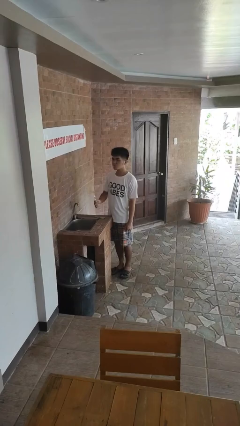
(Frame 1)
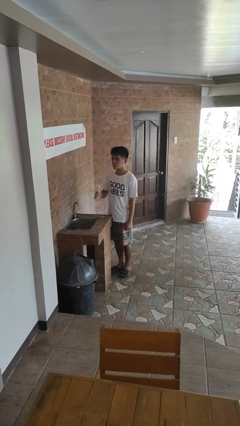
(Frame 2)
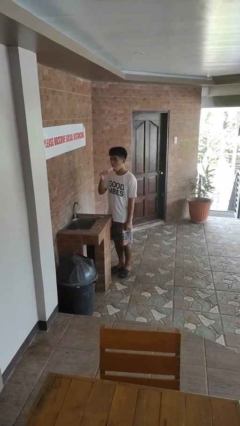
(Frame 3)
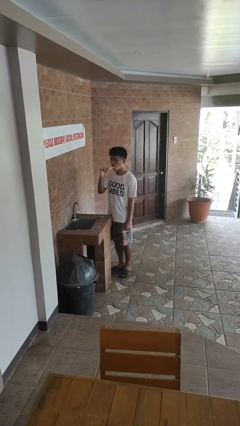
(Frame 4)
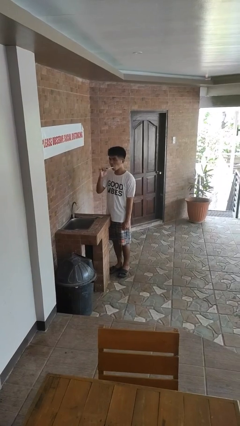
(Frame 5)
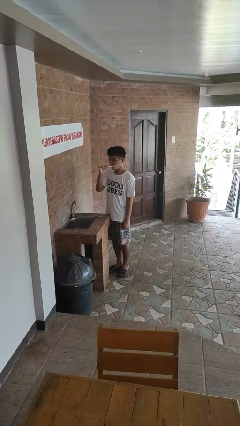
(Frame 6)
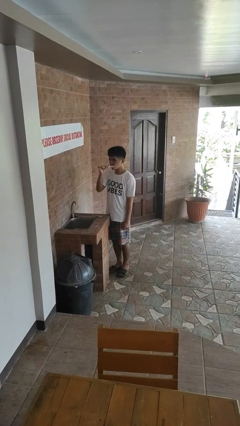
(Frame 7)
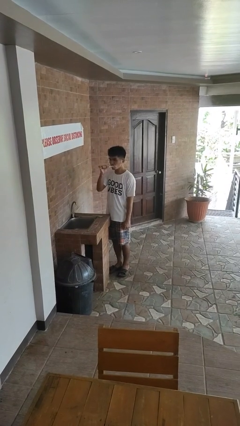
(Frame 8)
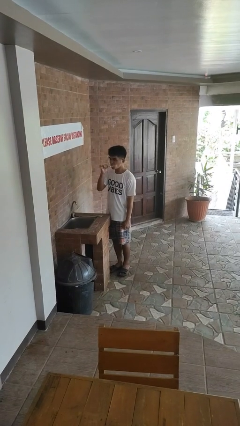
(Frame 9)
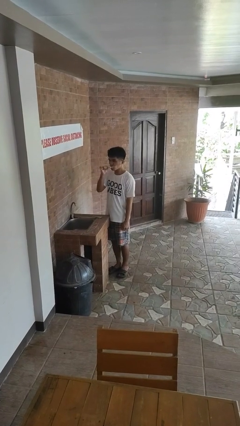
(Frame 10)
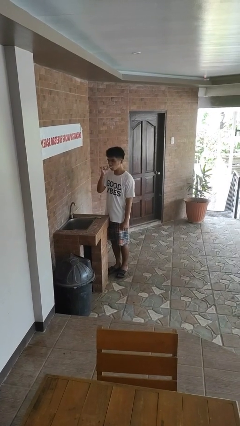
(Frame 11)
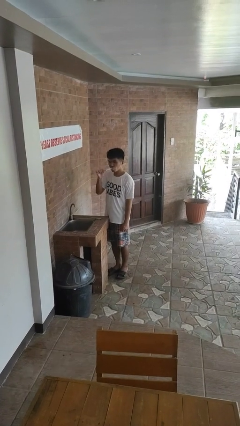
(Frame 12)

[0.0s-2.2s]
person brushes teeth

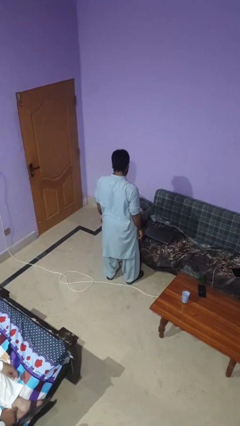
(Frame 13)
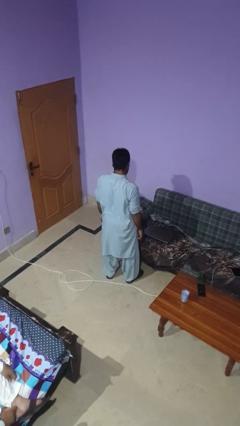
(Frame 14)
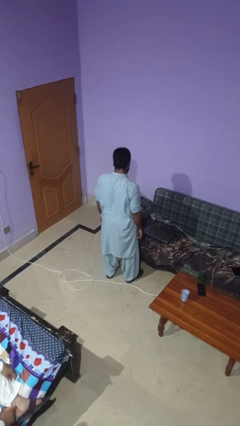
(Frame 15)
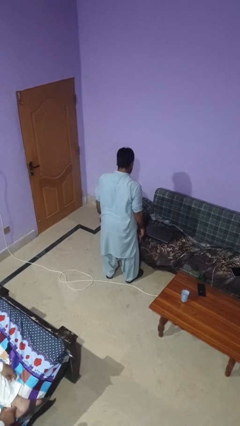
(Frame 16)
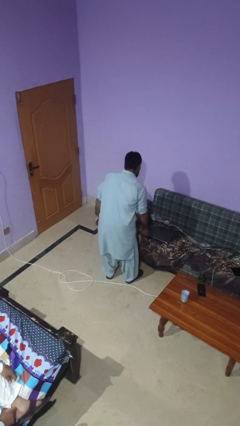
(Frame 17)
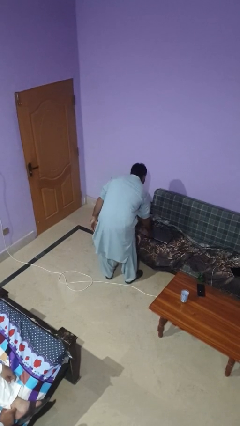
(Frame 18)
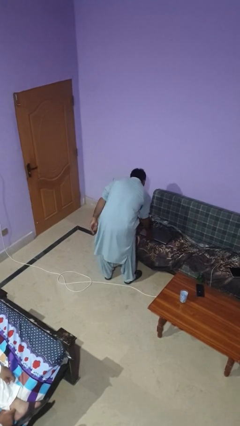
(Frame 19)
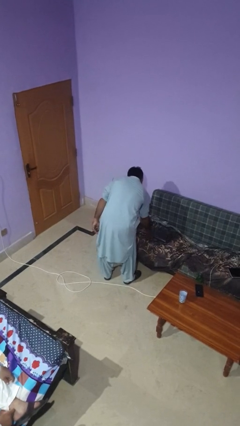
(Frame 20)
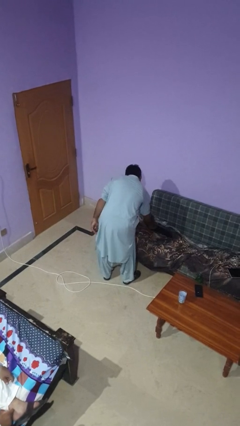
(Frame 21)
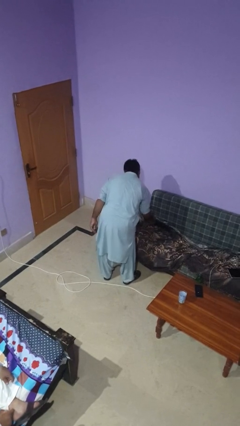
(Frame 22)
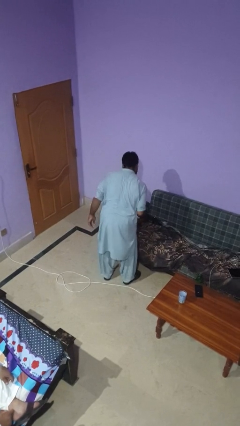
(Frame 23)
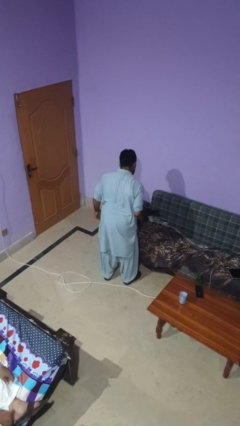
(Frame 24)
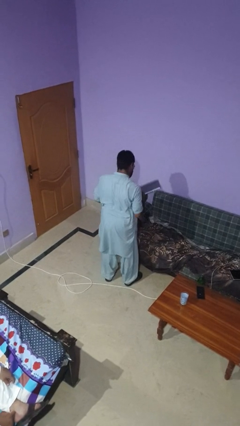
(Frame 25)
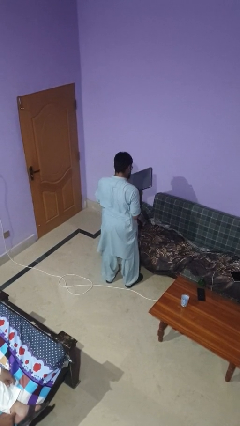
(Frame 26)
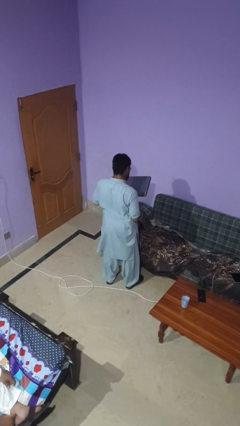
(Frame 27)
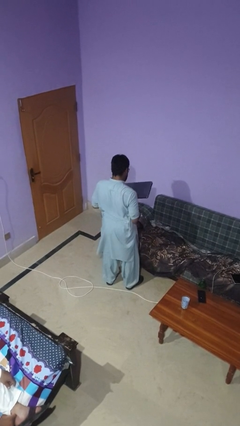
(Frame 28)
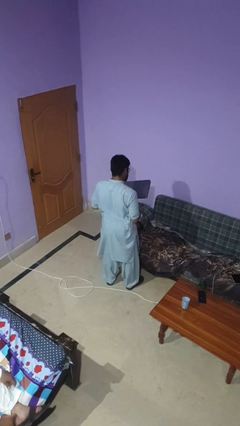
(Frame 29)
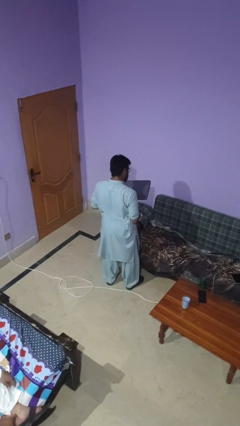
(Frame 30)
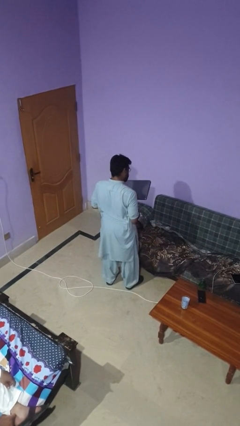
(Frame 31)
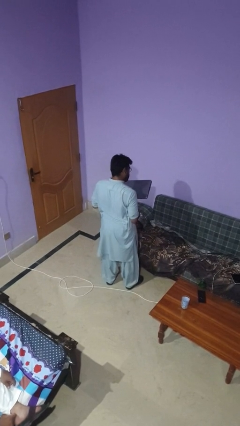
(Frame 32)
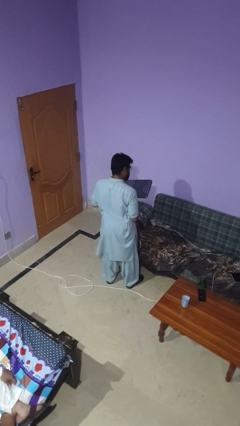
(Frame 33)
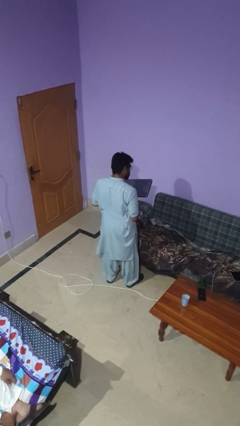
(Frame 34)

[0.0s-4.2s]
person picks up object from couch

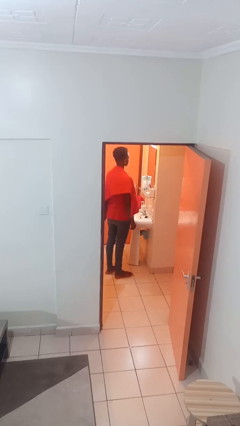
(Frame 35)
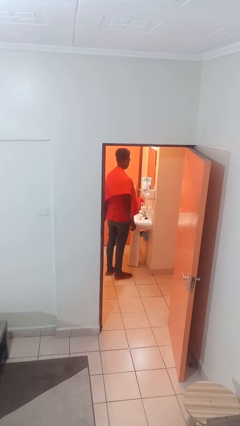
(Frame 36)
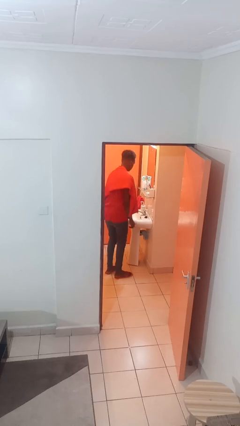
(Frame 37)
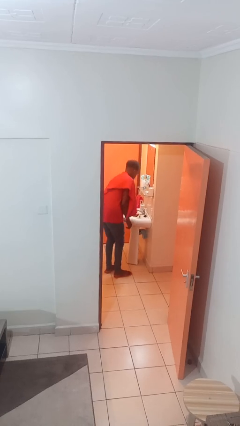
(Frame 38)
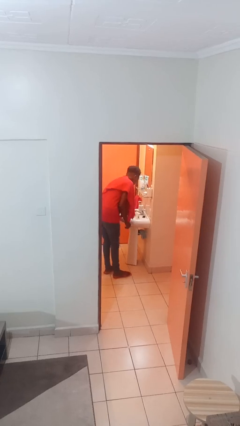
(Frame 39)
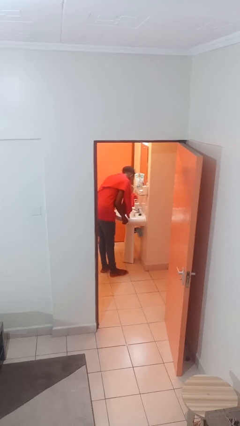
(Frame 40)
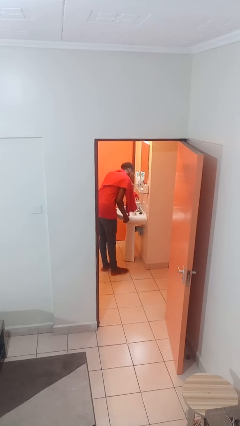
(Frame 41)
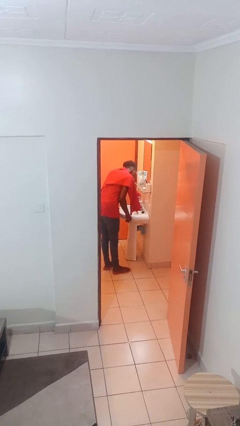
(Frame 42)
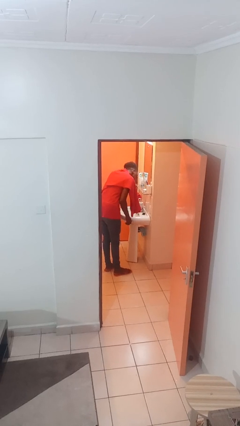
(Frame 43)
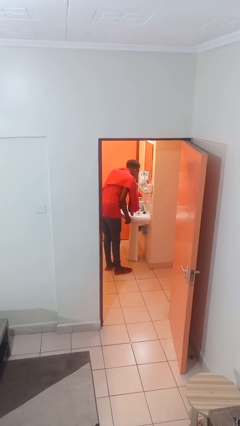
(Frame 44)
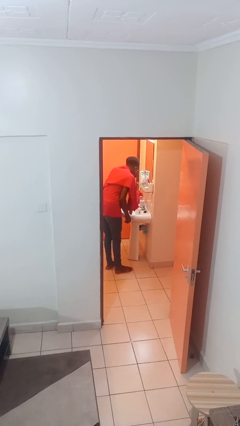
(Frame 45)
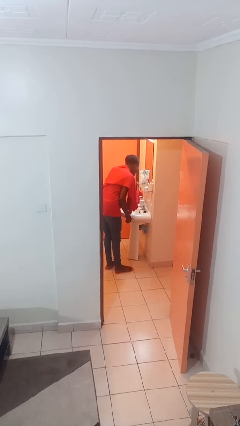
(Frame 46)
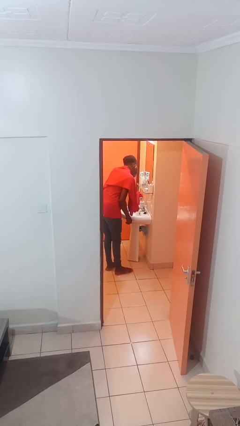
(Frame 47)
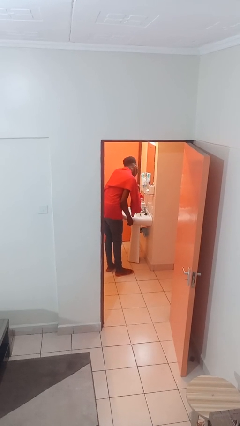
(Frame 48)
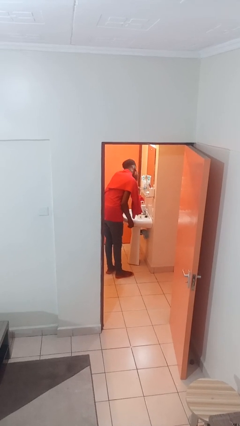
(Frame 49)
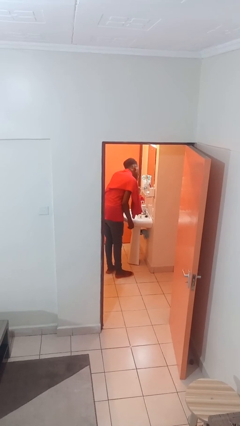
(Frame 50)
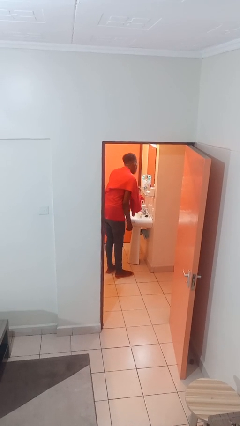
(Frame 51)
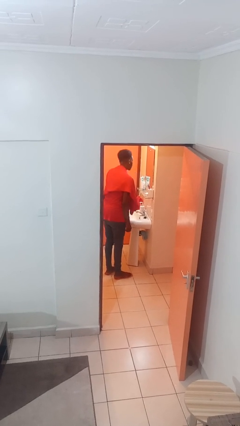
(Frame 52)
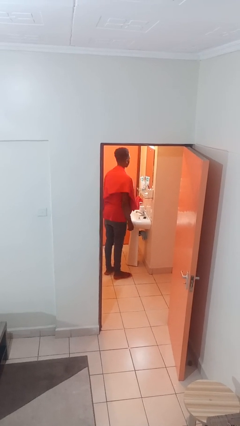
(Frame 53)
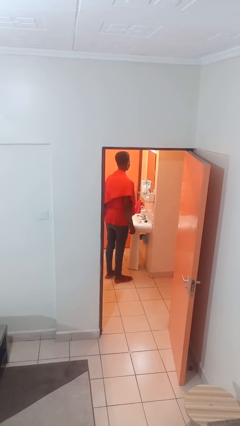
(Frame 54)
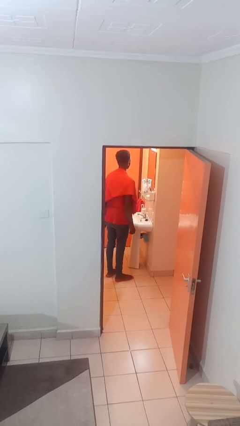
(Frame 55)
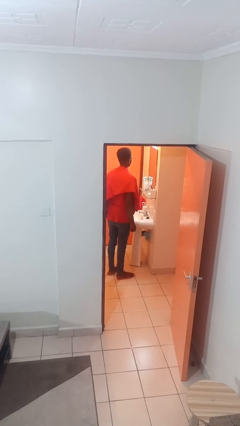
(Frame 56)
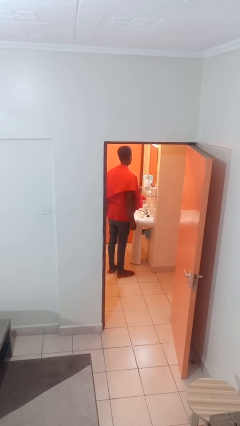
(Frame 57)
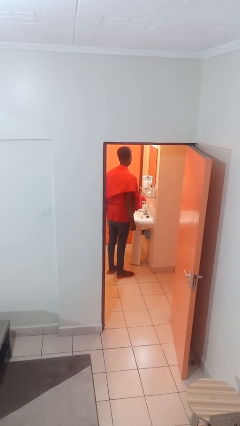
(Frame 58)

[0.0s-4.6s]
person washes face

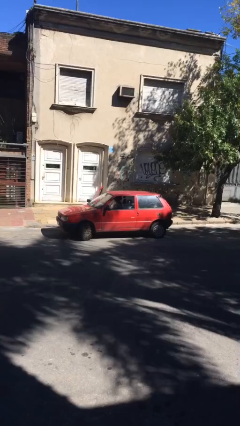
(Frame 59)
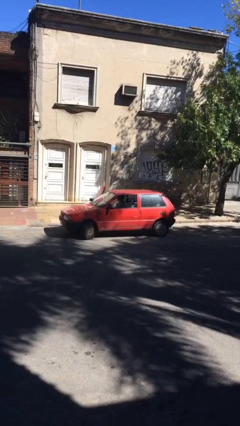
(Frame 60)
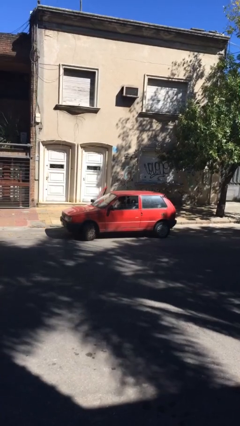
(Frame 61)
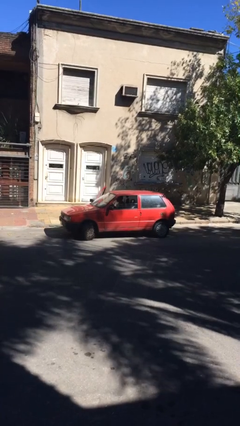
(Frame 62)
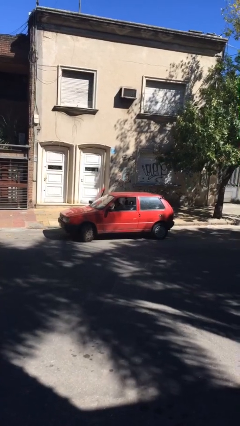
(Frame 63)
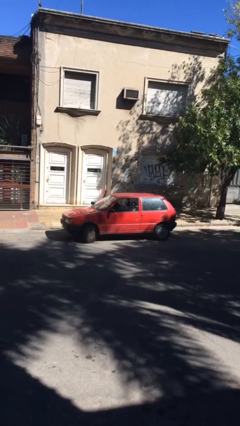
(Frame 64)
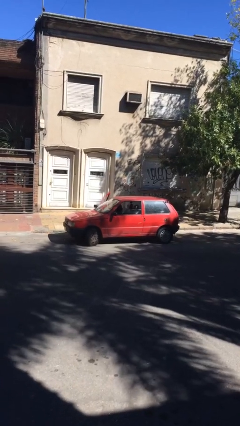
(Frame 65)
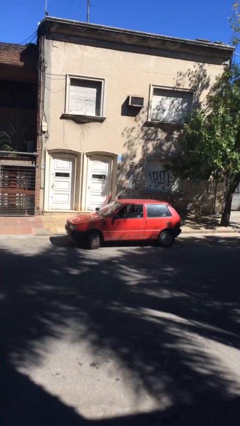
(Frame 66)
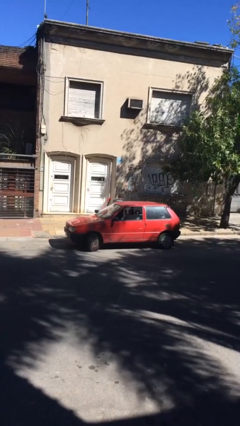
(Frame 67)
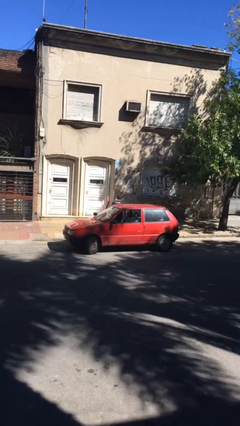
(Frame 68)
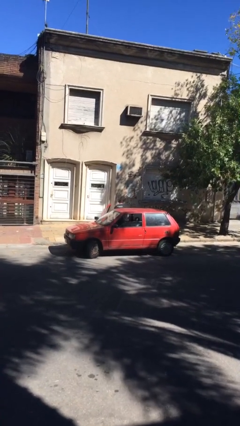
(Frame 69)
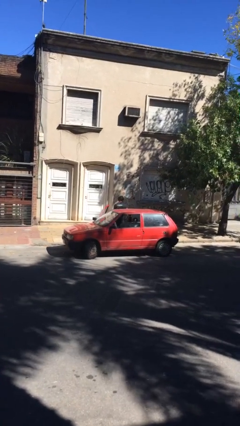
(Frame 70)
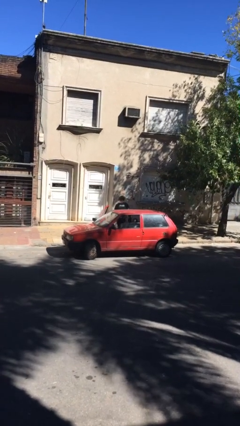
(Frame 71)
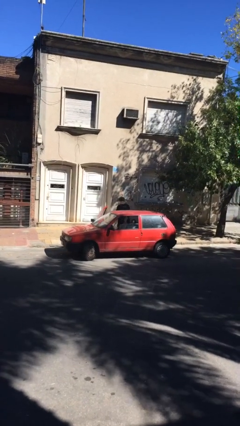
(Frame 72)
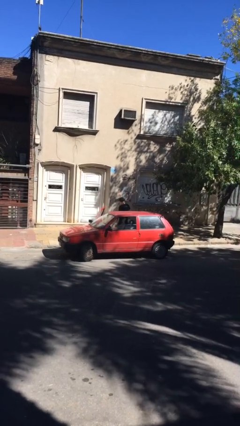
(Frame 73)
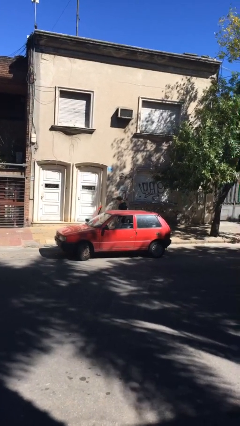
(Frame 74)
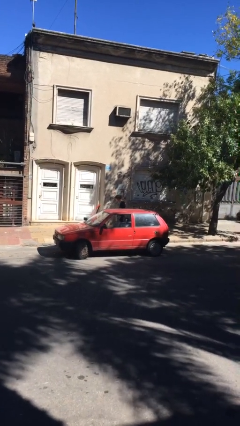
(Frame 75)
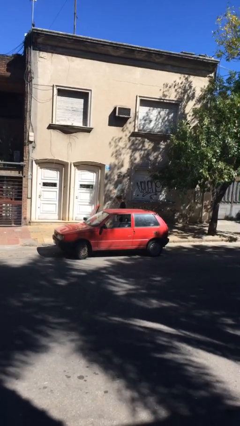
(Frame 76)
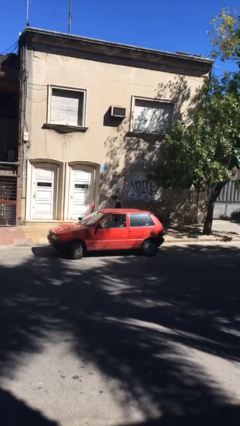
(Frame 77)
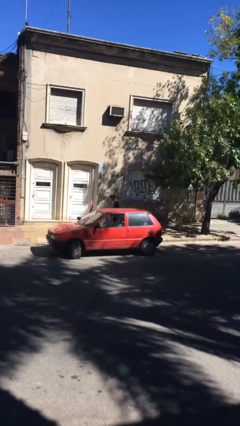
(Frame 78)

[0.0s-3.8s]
person exits car

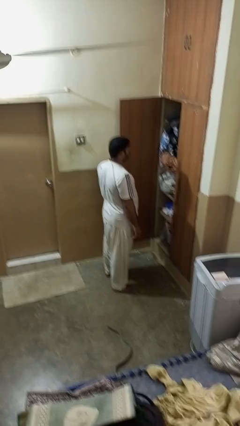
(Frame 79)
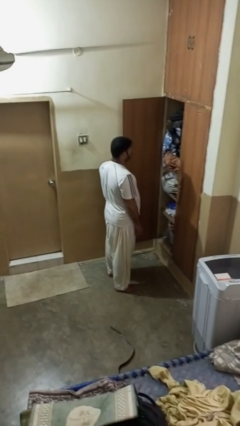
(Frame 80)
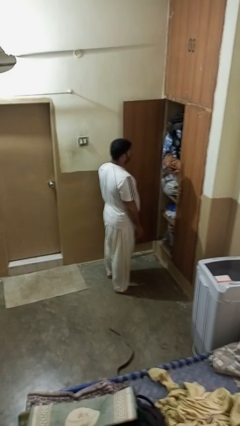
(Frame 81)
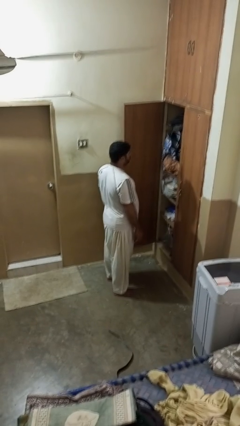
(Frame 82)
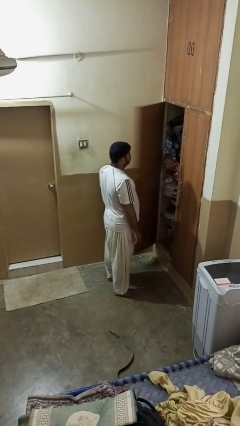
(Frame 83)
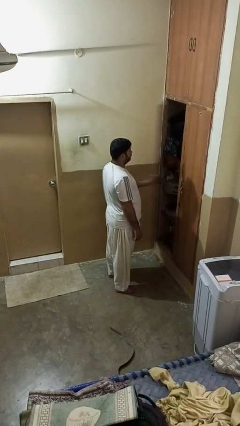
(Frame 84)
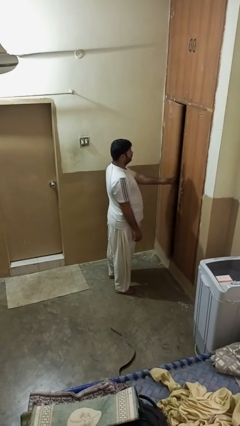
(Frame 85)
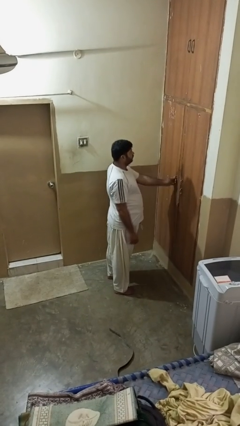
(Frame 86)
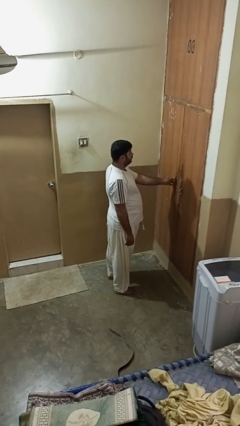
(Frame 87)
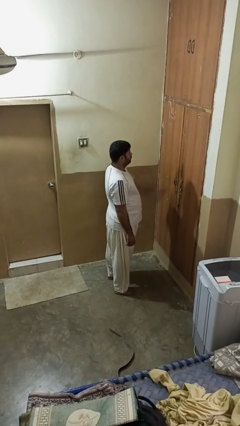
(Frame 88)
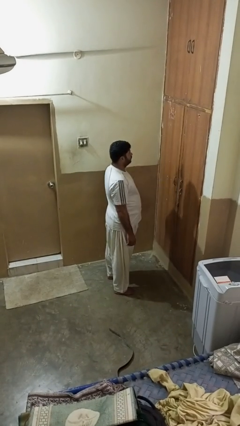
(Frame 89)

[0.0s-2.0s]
person closes closet door

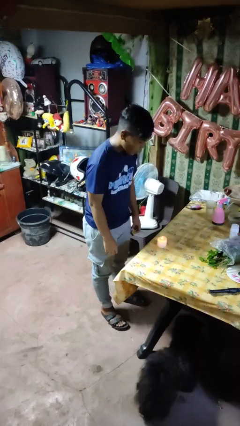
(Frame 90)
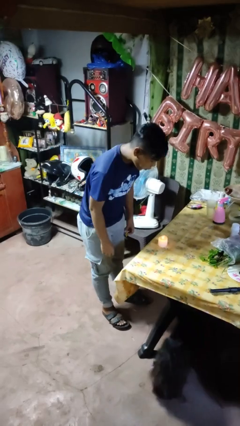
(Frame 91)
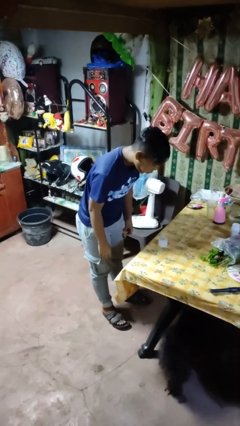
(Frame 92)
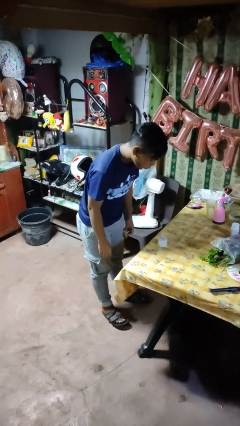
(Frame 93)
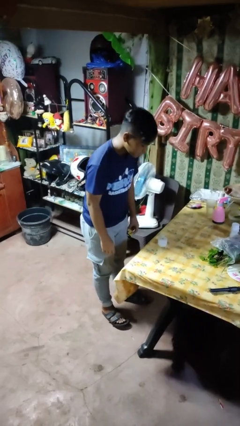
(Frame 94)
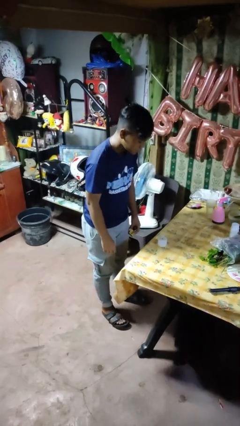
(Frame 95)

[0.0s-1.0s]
person extinguishes candle
